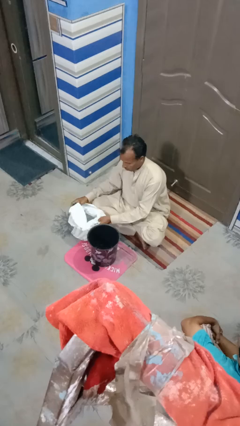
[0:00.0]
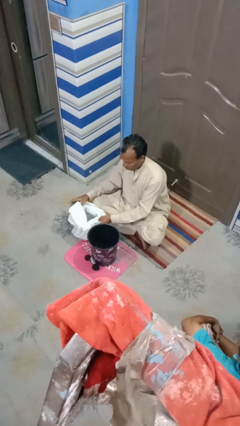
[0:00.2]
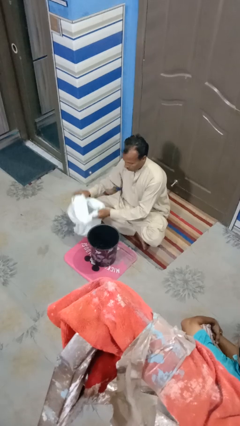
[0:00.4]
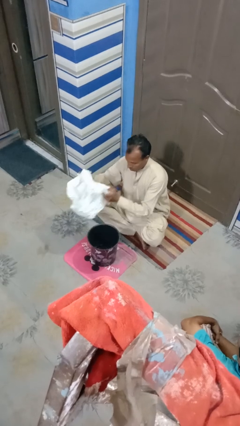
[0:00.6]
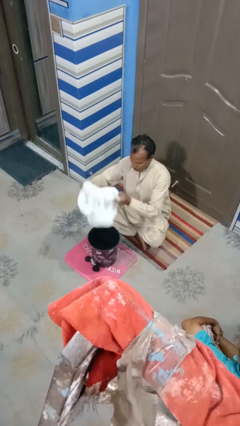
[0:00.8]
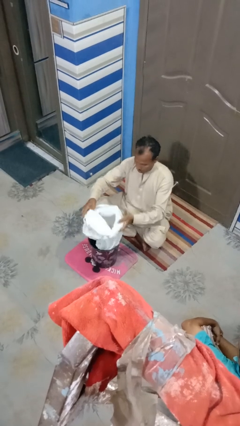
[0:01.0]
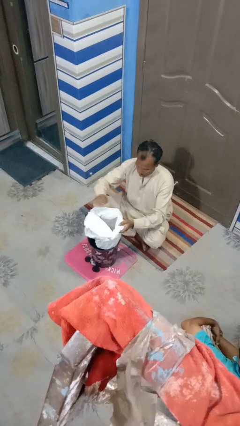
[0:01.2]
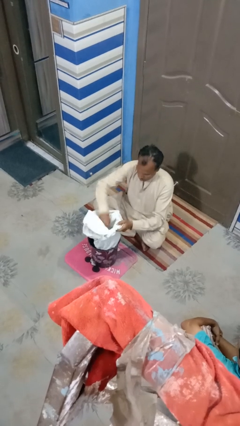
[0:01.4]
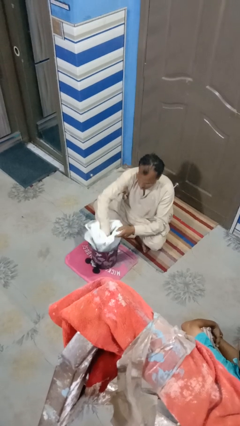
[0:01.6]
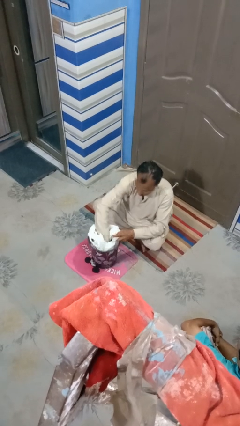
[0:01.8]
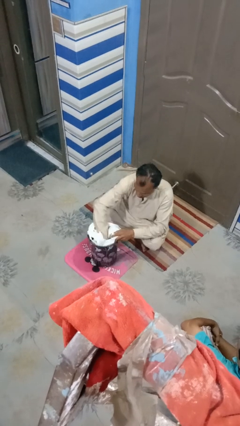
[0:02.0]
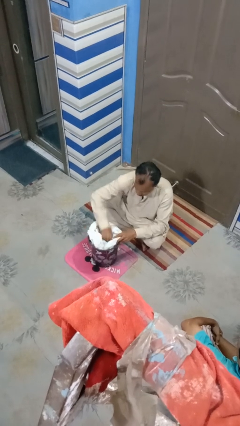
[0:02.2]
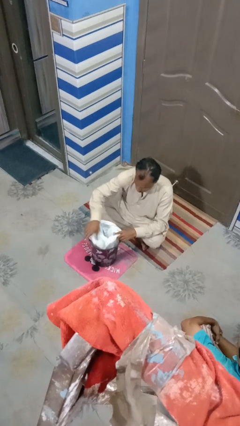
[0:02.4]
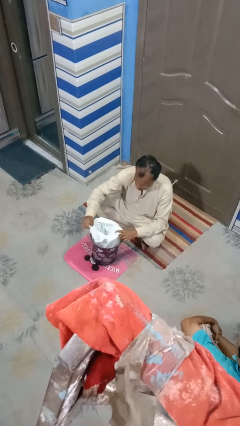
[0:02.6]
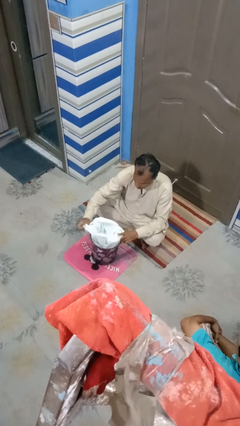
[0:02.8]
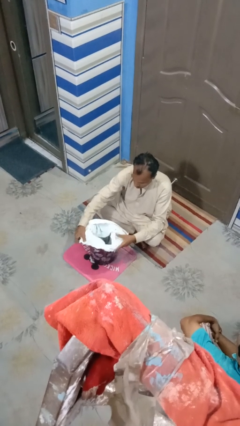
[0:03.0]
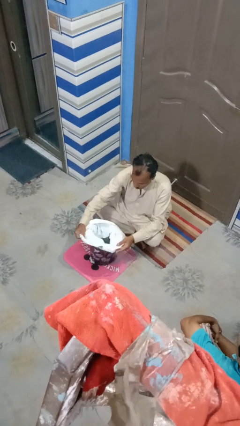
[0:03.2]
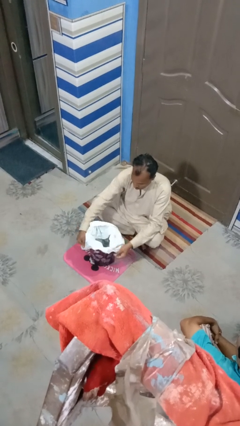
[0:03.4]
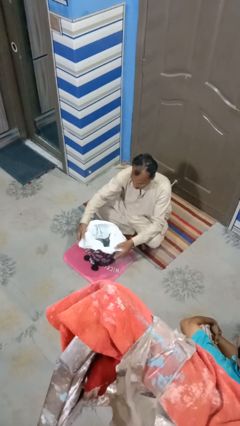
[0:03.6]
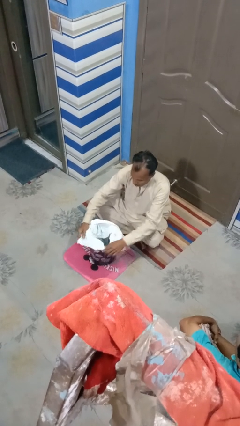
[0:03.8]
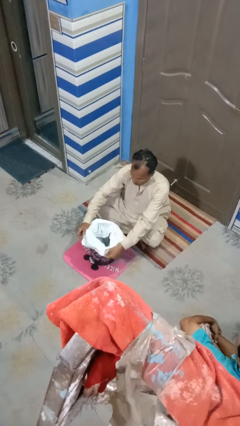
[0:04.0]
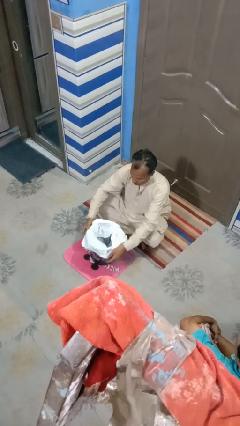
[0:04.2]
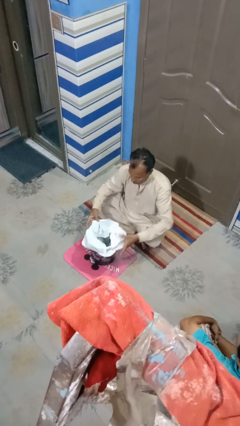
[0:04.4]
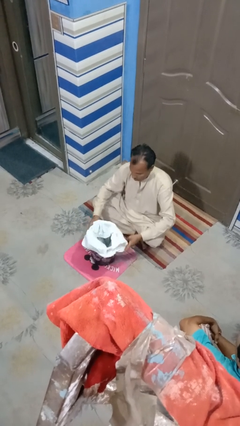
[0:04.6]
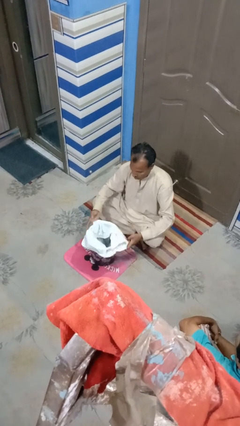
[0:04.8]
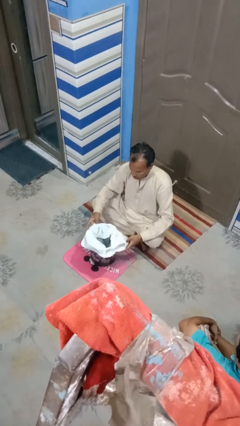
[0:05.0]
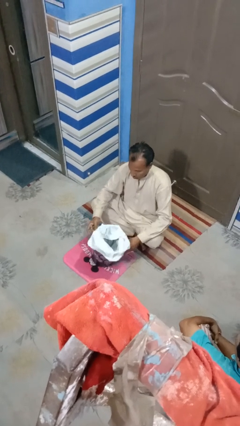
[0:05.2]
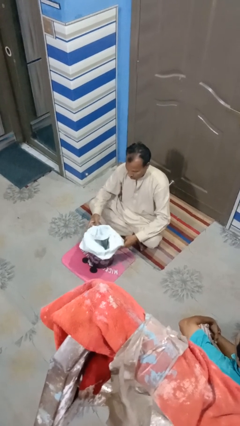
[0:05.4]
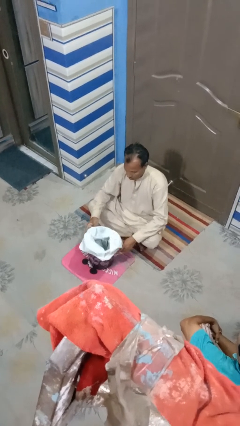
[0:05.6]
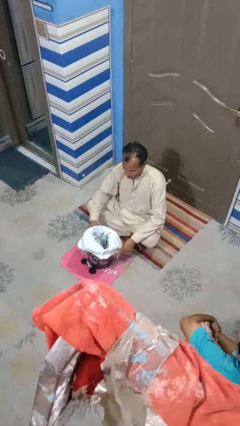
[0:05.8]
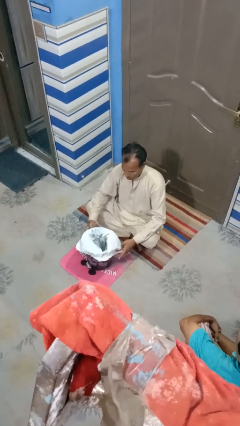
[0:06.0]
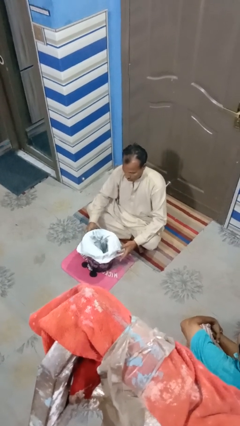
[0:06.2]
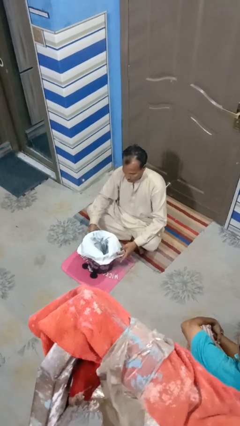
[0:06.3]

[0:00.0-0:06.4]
person removes trashbag from trashcan

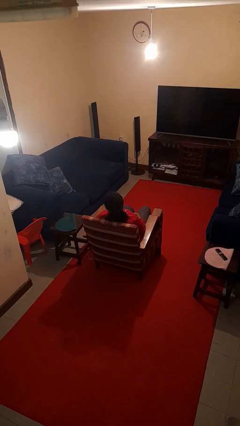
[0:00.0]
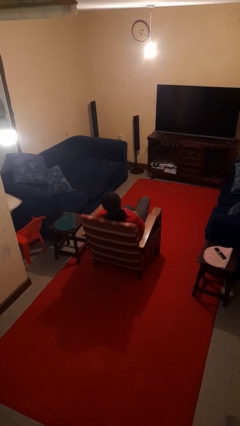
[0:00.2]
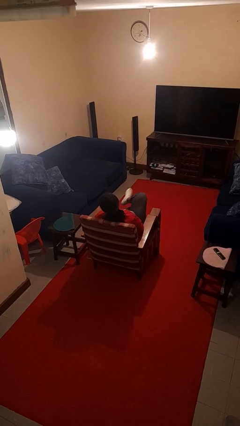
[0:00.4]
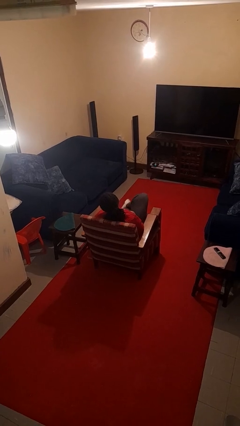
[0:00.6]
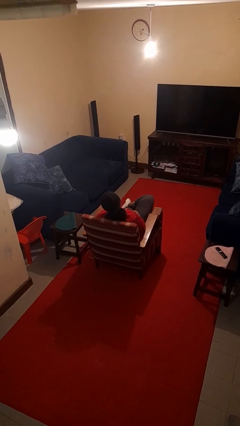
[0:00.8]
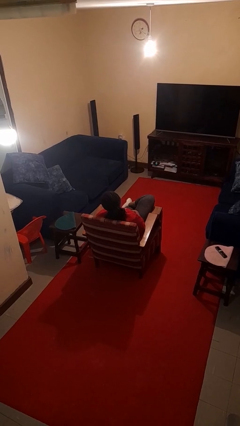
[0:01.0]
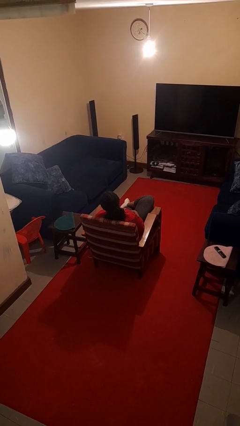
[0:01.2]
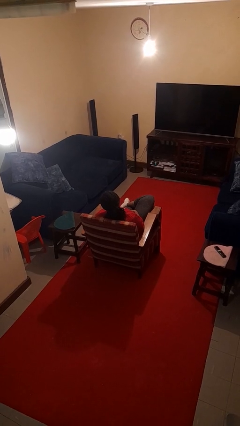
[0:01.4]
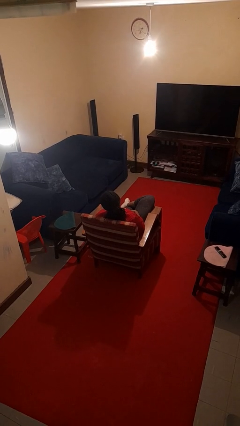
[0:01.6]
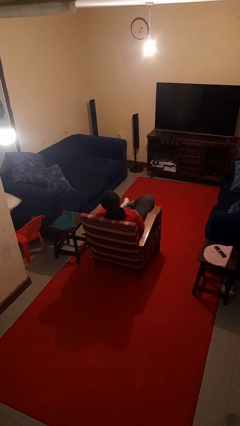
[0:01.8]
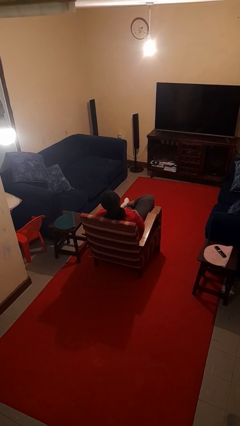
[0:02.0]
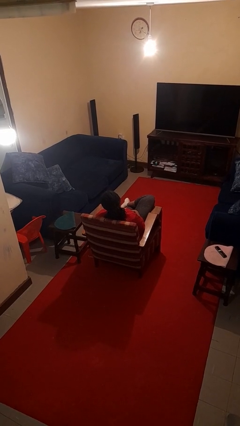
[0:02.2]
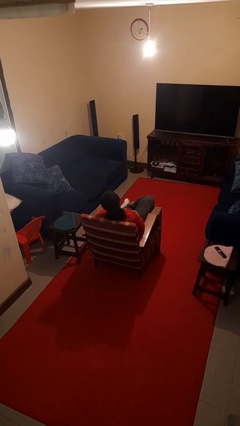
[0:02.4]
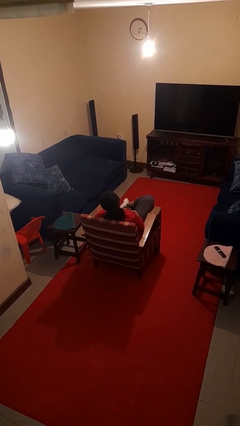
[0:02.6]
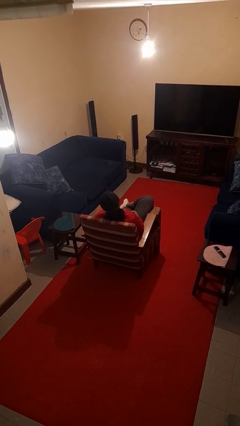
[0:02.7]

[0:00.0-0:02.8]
person crosses legs

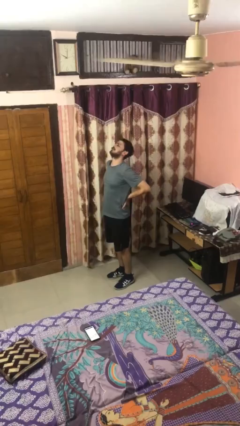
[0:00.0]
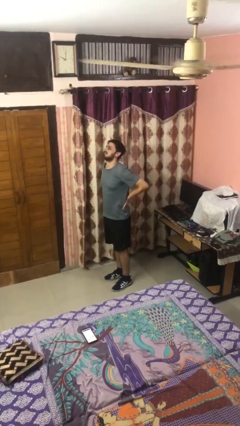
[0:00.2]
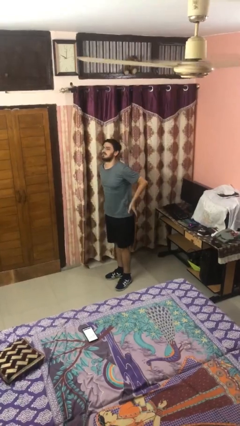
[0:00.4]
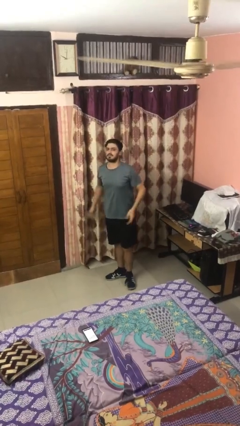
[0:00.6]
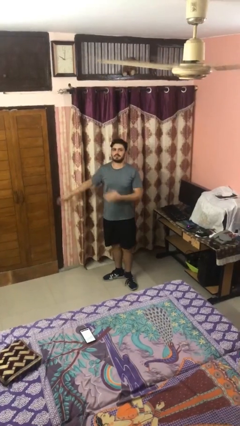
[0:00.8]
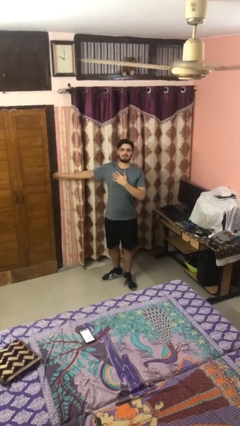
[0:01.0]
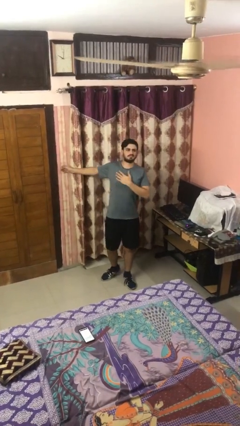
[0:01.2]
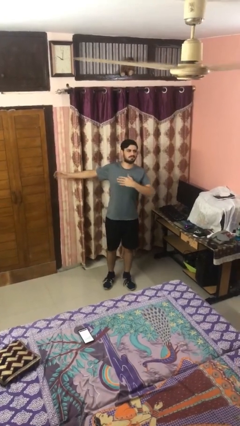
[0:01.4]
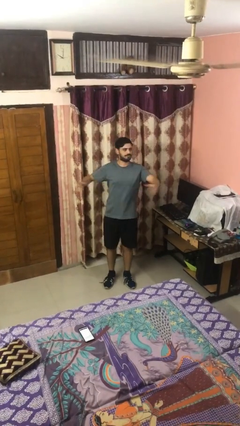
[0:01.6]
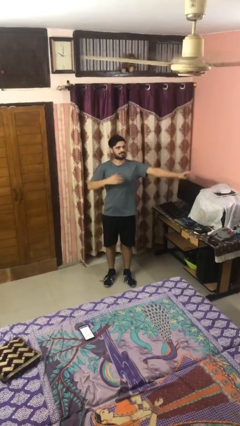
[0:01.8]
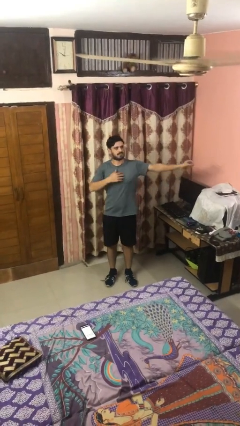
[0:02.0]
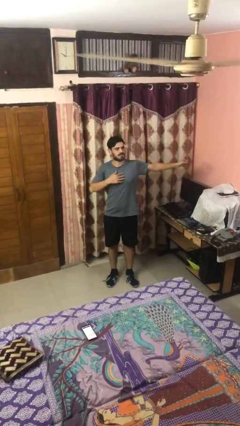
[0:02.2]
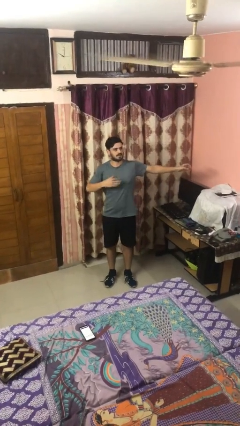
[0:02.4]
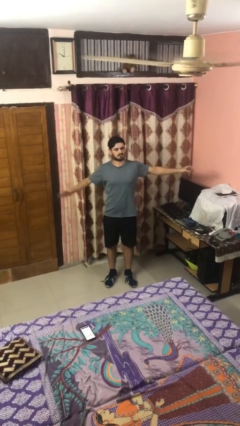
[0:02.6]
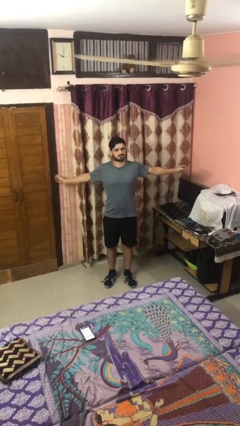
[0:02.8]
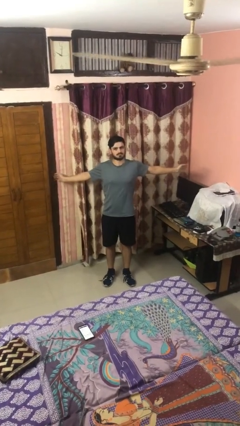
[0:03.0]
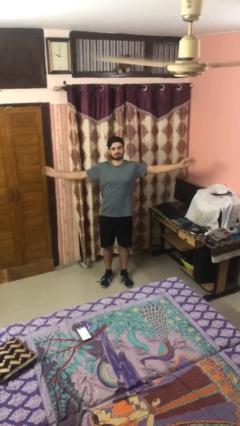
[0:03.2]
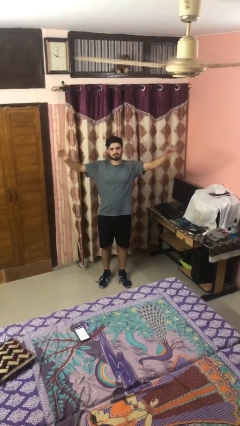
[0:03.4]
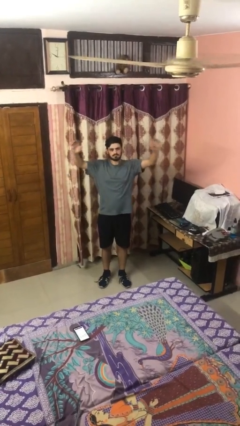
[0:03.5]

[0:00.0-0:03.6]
person stretches arms to side

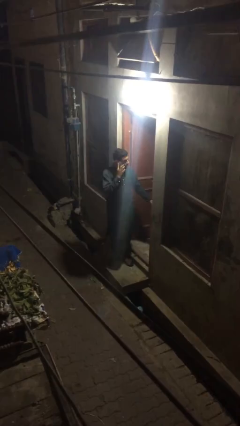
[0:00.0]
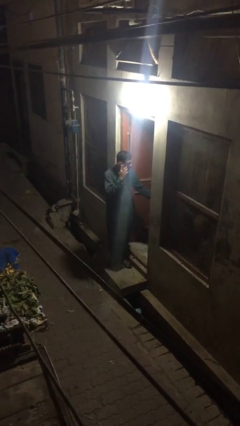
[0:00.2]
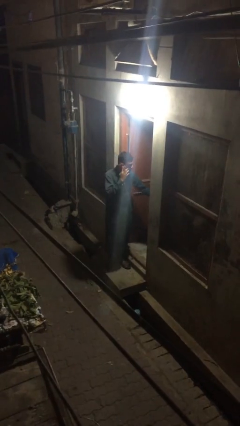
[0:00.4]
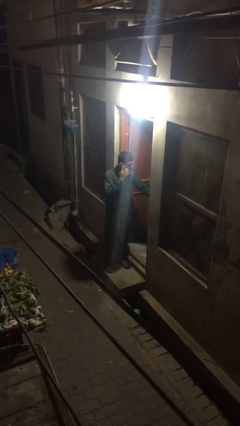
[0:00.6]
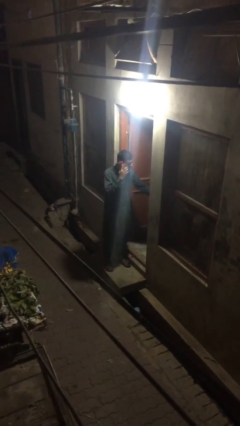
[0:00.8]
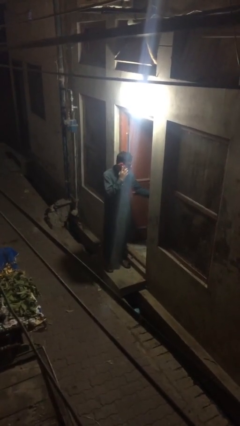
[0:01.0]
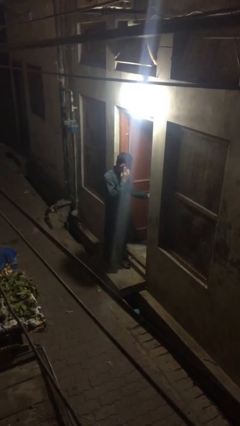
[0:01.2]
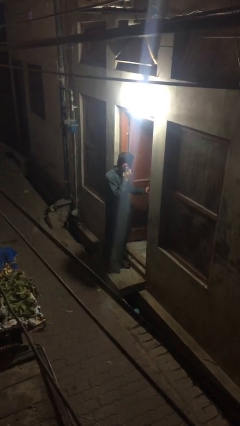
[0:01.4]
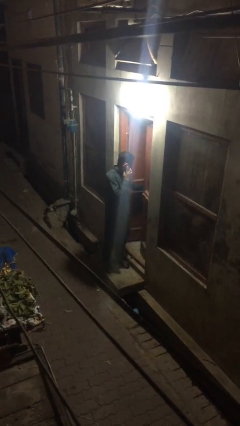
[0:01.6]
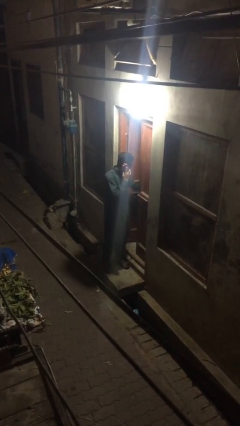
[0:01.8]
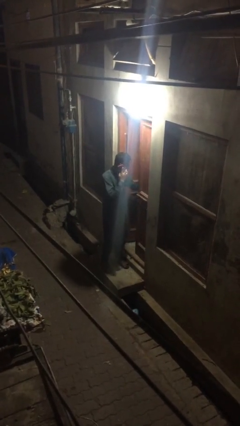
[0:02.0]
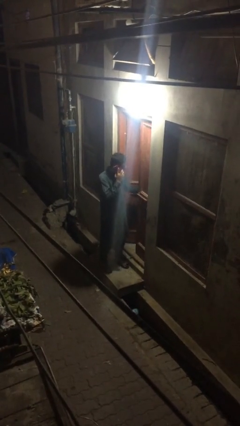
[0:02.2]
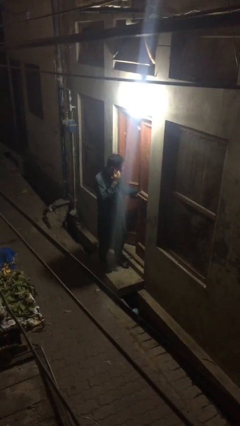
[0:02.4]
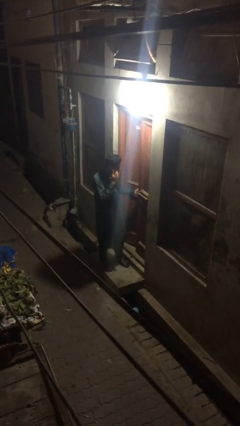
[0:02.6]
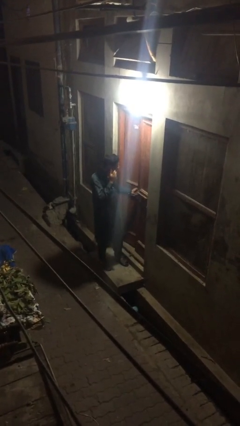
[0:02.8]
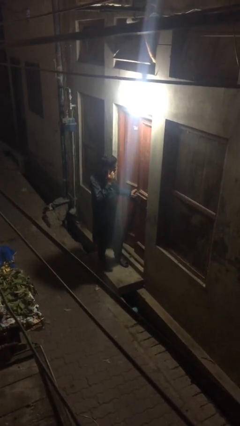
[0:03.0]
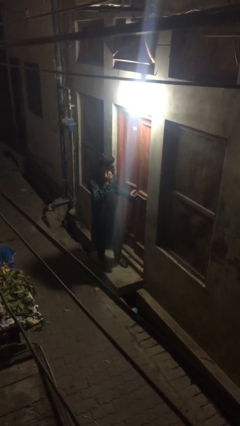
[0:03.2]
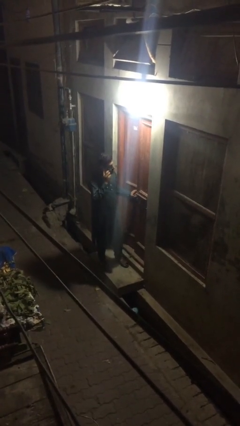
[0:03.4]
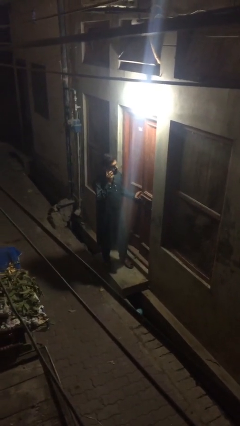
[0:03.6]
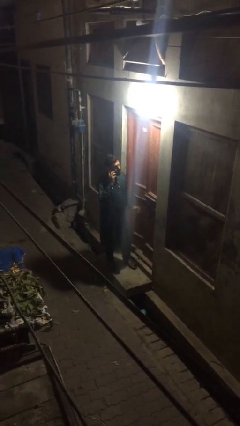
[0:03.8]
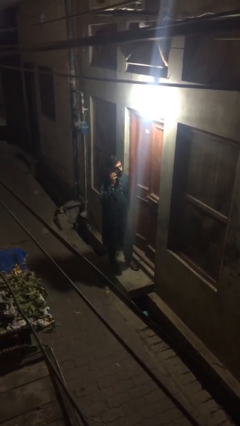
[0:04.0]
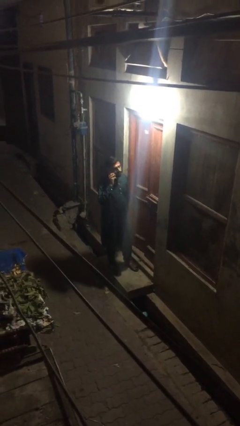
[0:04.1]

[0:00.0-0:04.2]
person closes facility door

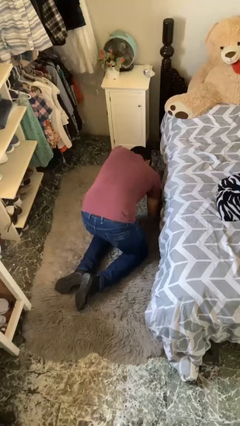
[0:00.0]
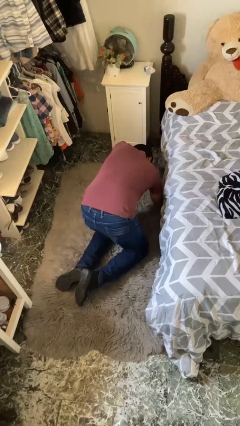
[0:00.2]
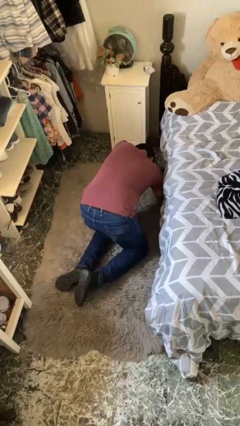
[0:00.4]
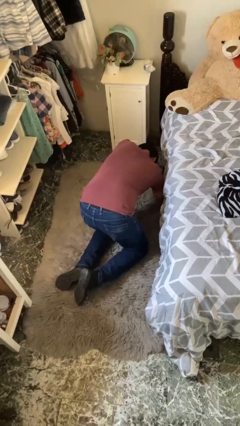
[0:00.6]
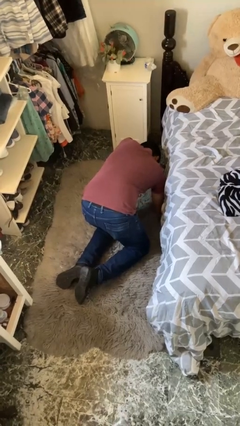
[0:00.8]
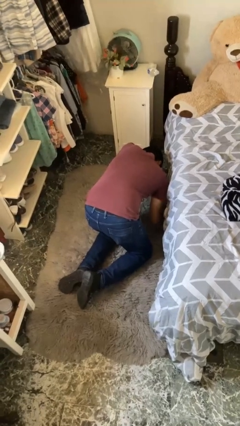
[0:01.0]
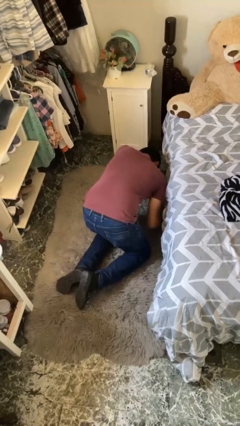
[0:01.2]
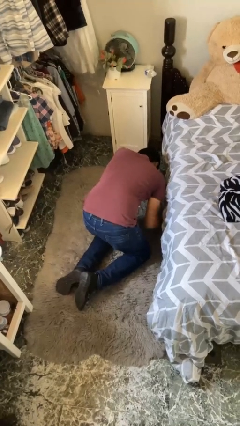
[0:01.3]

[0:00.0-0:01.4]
person searches under bed
